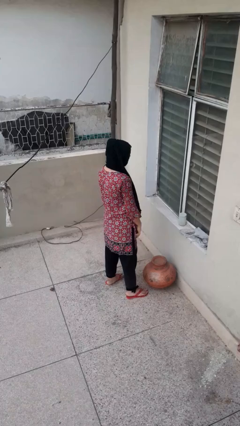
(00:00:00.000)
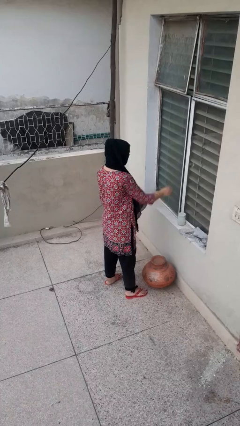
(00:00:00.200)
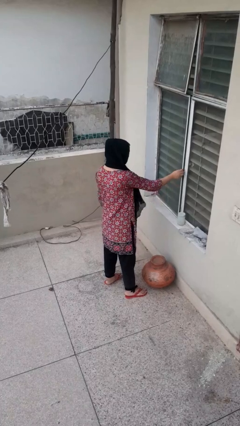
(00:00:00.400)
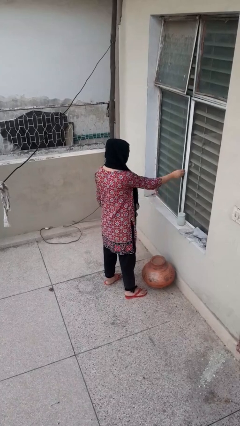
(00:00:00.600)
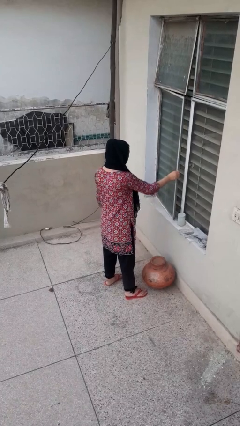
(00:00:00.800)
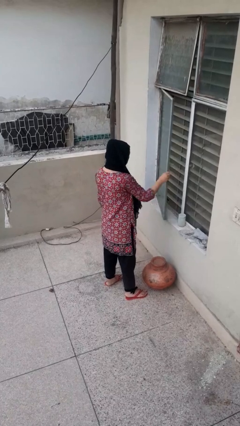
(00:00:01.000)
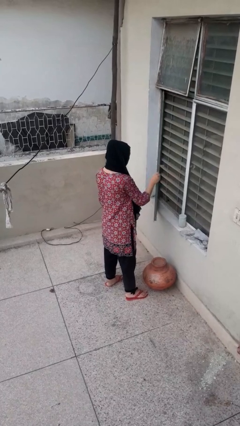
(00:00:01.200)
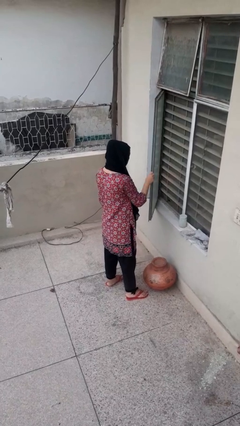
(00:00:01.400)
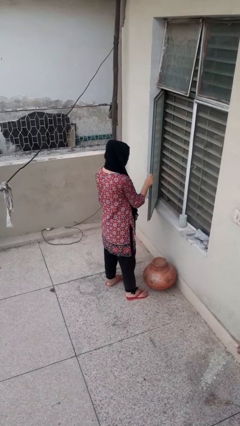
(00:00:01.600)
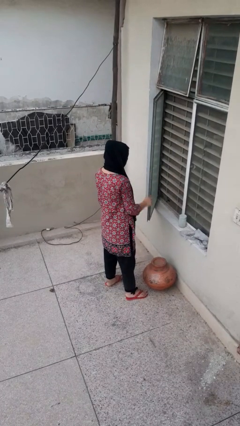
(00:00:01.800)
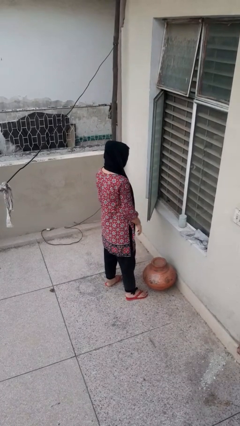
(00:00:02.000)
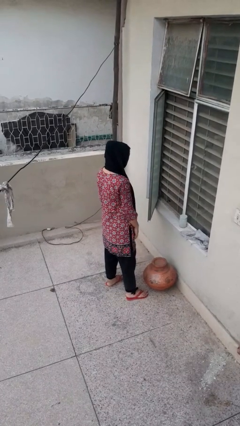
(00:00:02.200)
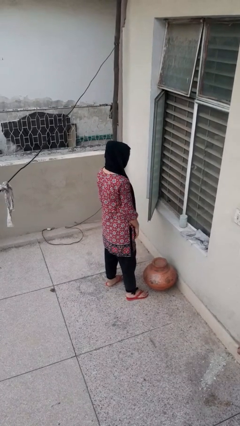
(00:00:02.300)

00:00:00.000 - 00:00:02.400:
person opens home window

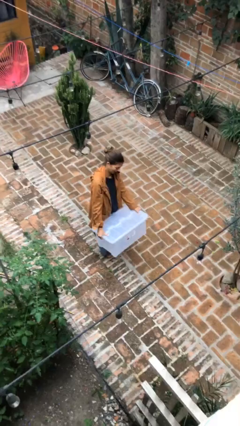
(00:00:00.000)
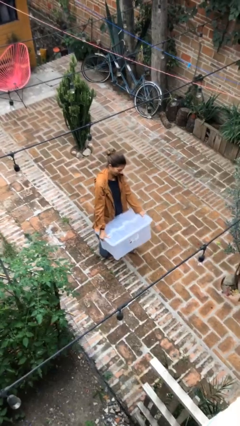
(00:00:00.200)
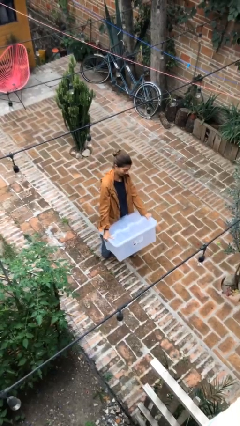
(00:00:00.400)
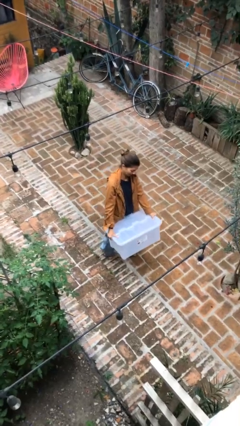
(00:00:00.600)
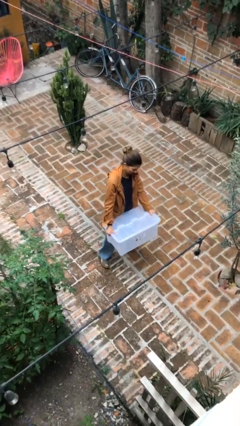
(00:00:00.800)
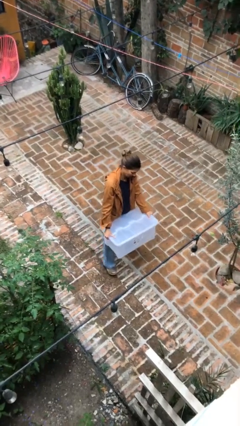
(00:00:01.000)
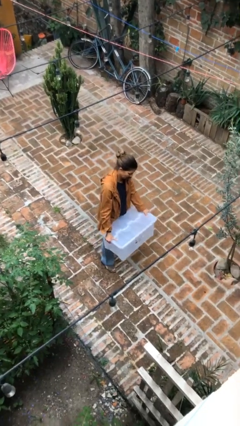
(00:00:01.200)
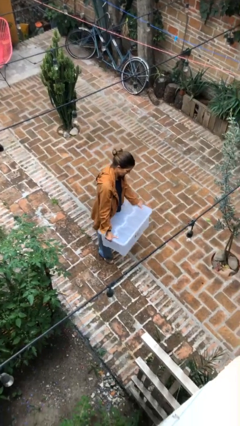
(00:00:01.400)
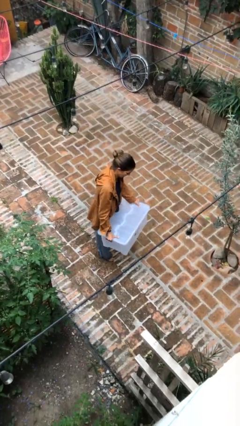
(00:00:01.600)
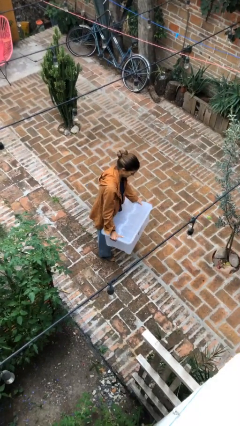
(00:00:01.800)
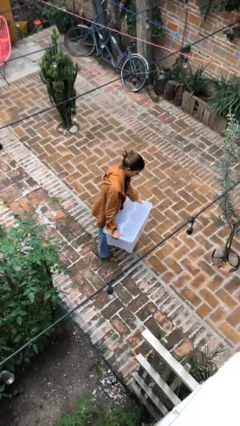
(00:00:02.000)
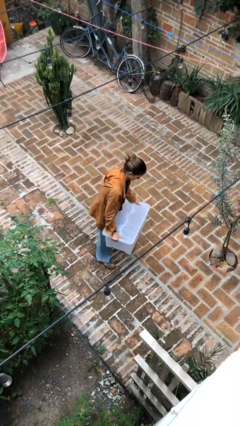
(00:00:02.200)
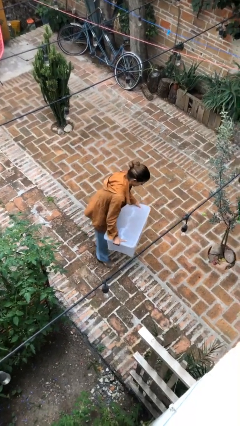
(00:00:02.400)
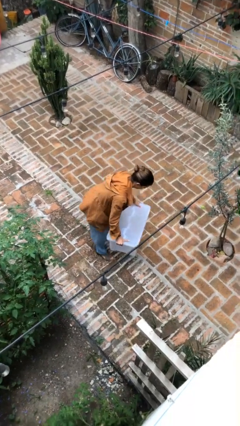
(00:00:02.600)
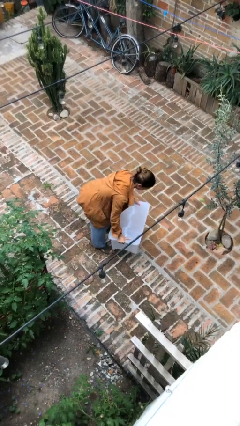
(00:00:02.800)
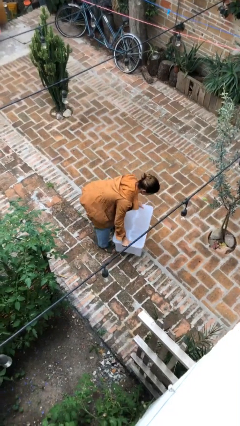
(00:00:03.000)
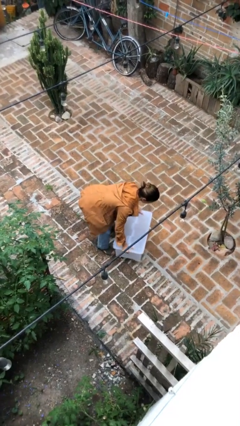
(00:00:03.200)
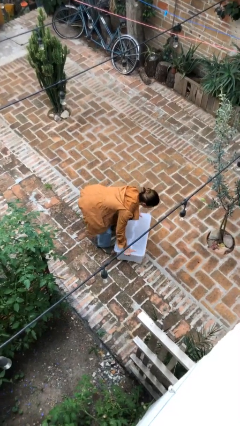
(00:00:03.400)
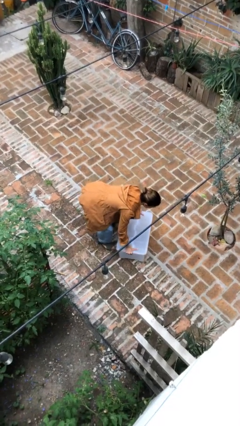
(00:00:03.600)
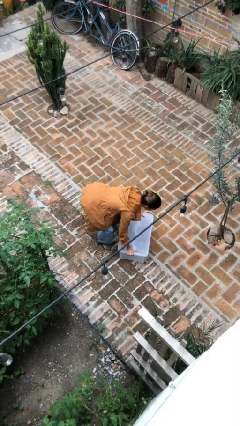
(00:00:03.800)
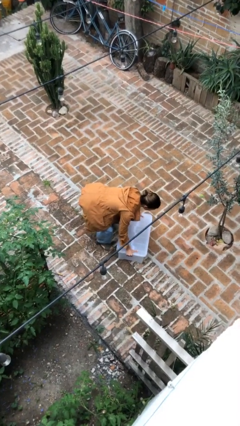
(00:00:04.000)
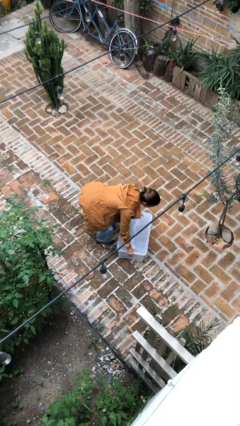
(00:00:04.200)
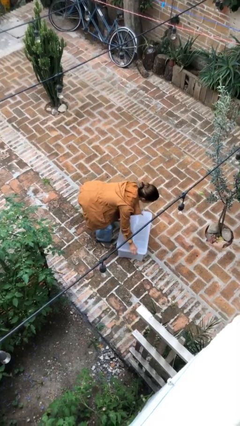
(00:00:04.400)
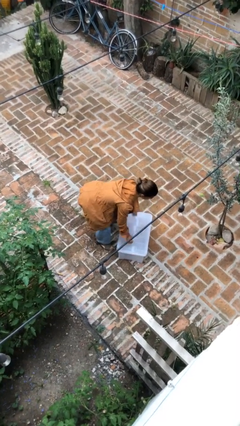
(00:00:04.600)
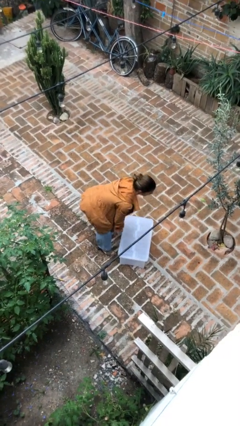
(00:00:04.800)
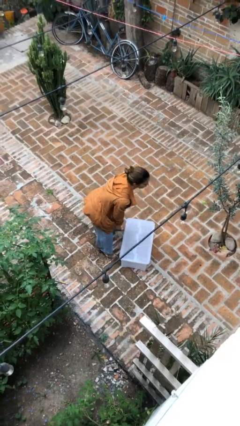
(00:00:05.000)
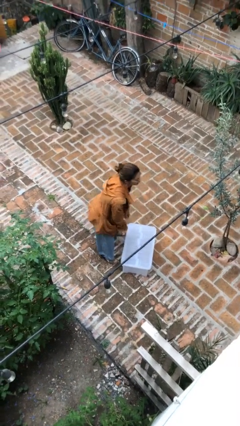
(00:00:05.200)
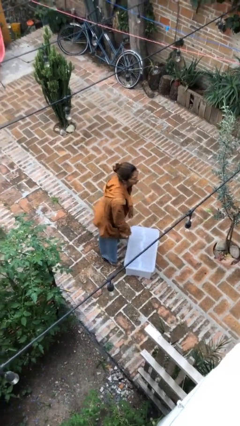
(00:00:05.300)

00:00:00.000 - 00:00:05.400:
person puts down object on floor

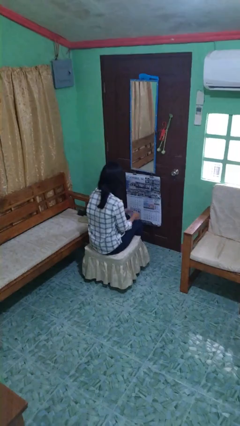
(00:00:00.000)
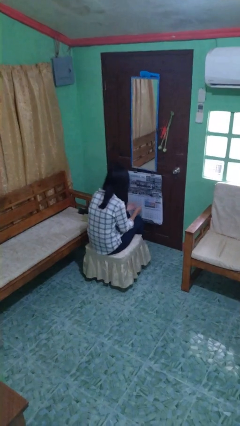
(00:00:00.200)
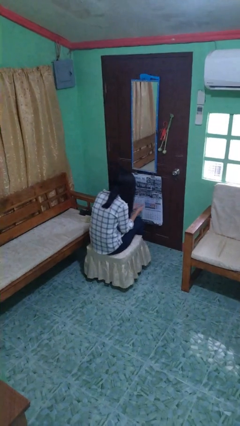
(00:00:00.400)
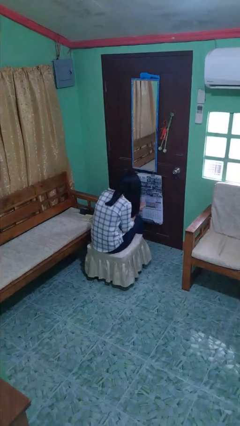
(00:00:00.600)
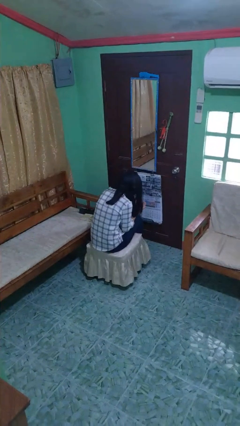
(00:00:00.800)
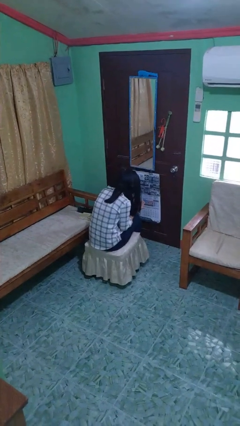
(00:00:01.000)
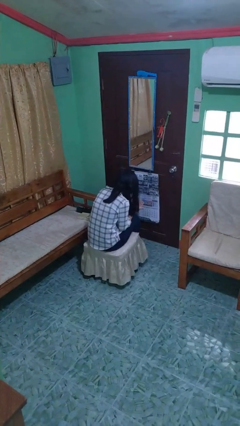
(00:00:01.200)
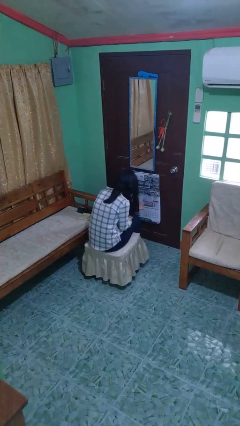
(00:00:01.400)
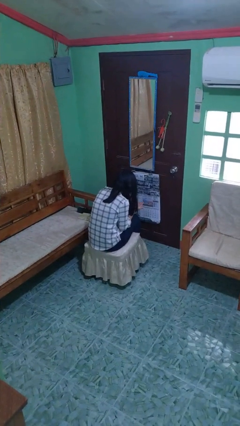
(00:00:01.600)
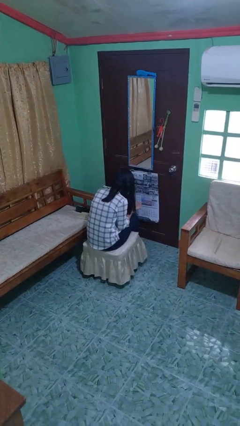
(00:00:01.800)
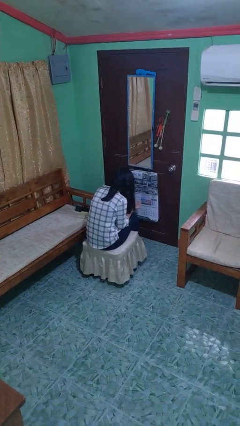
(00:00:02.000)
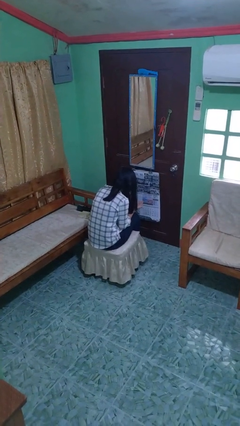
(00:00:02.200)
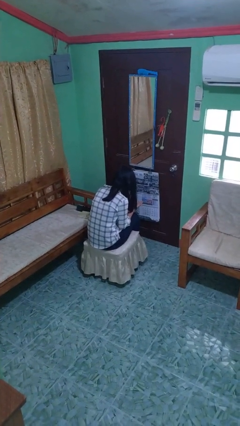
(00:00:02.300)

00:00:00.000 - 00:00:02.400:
person looks at hands in lap

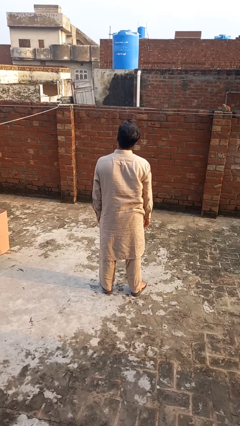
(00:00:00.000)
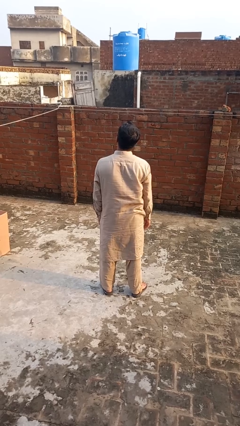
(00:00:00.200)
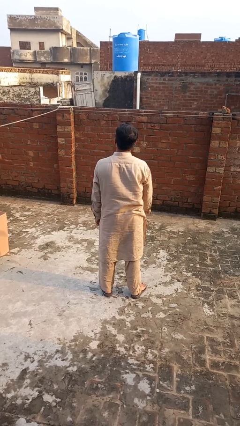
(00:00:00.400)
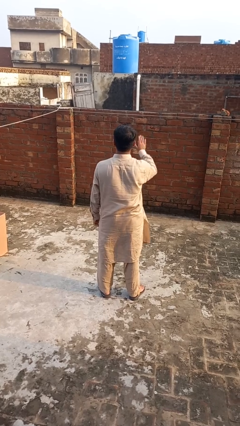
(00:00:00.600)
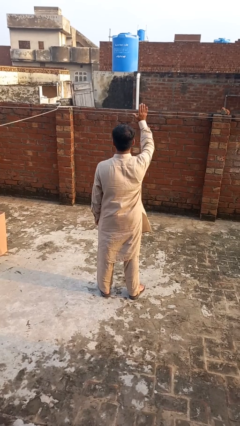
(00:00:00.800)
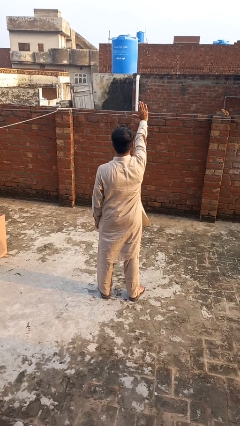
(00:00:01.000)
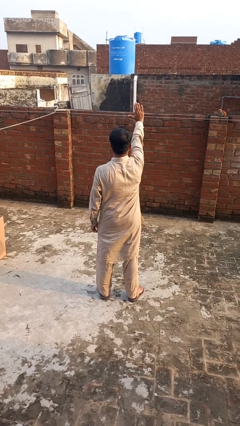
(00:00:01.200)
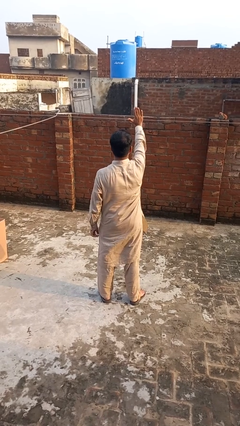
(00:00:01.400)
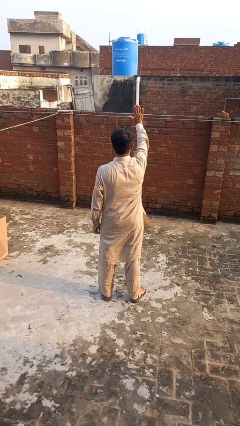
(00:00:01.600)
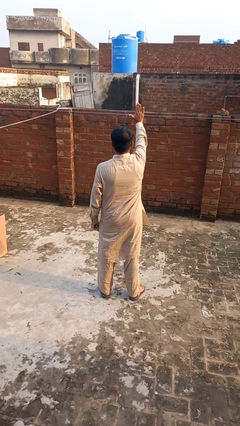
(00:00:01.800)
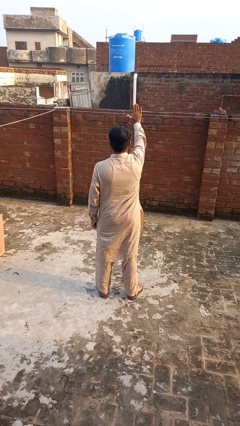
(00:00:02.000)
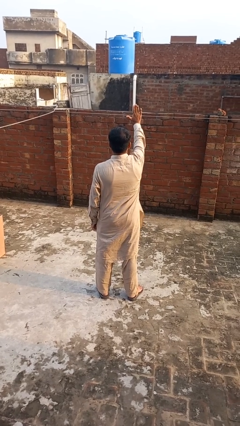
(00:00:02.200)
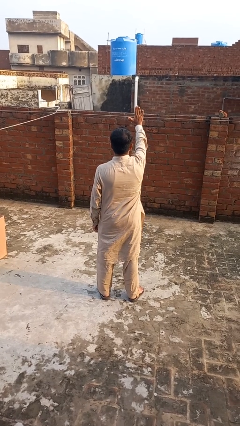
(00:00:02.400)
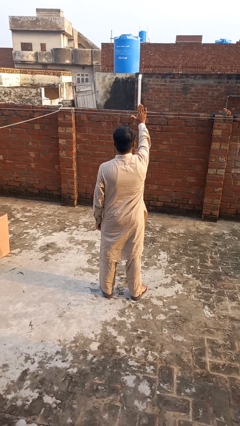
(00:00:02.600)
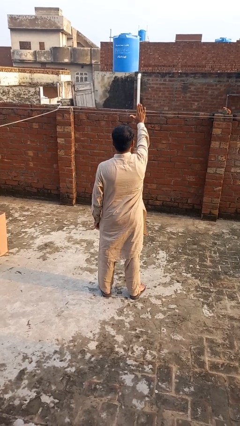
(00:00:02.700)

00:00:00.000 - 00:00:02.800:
person gestures stop

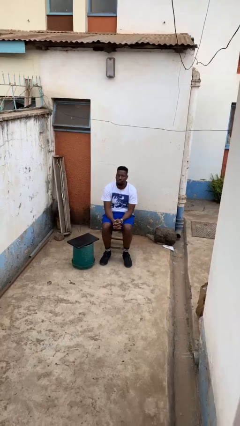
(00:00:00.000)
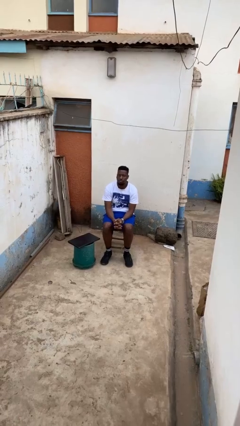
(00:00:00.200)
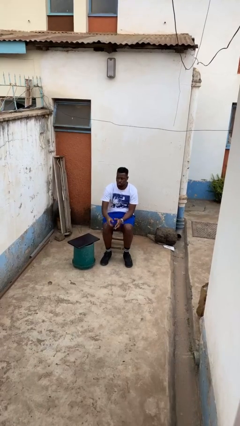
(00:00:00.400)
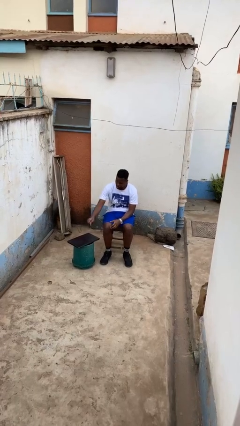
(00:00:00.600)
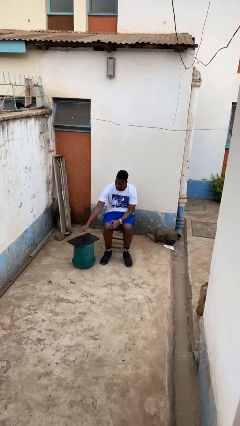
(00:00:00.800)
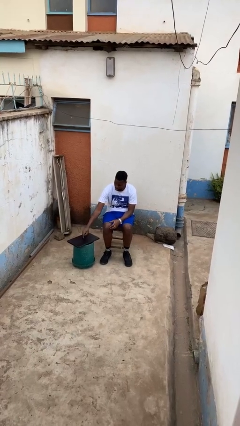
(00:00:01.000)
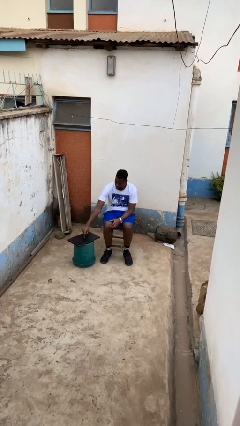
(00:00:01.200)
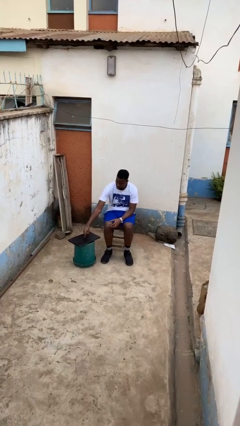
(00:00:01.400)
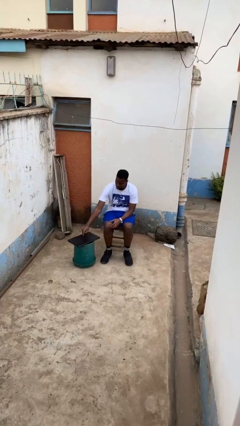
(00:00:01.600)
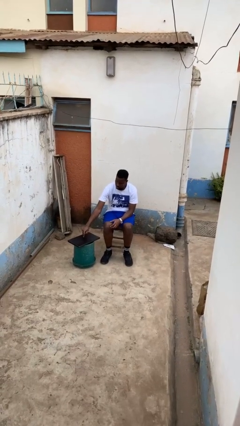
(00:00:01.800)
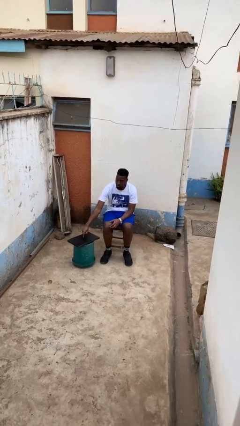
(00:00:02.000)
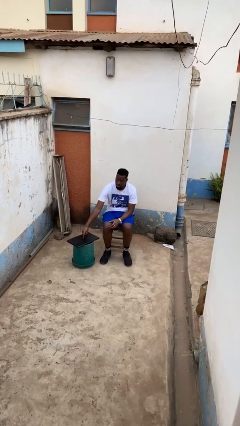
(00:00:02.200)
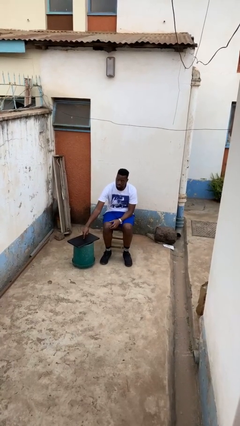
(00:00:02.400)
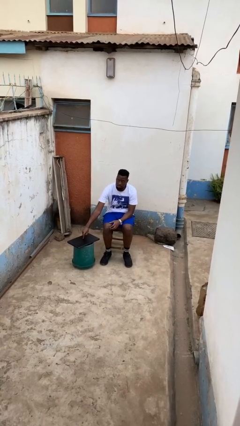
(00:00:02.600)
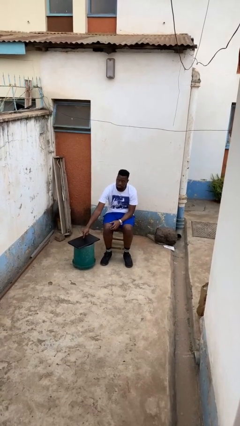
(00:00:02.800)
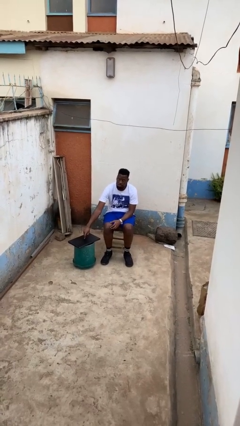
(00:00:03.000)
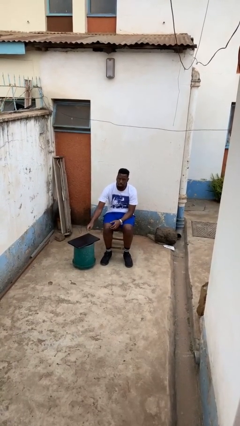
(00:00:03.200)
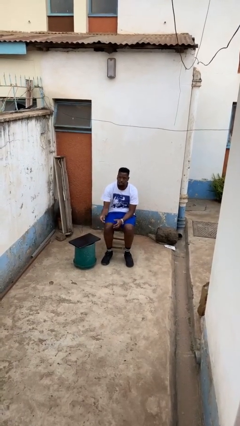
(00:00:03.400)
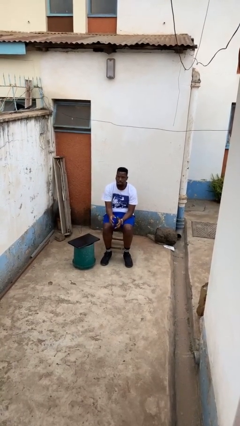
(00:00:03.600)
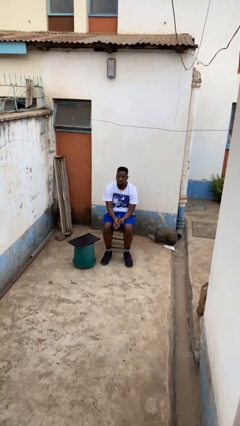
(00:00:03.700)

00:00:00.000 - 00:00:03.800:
person taps object with finger

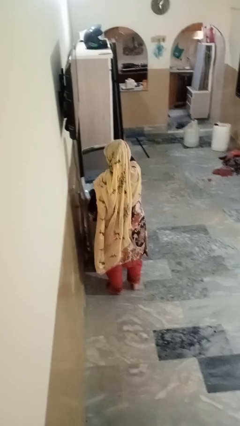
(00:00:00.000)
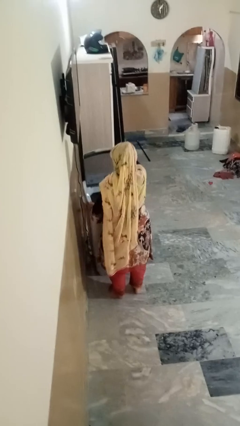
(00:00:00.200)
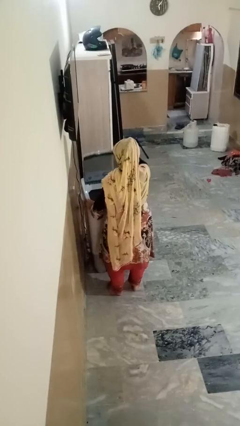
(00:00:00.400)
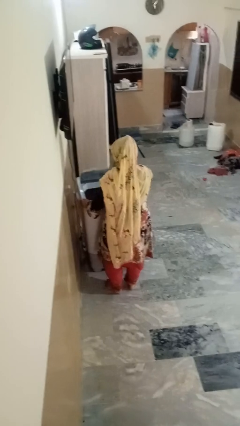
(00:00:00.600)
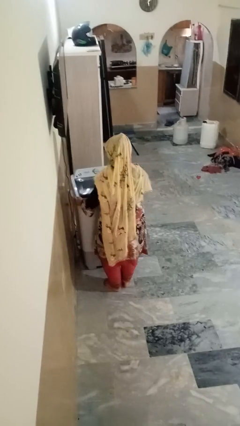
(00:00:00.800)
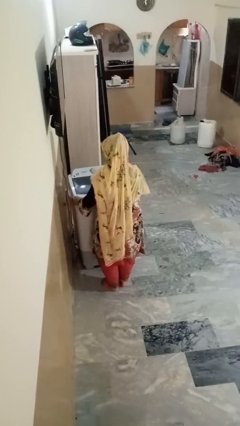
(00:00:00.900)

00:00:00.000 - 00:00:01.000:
person closes clothes washer
